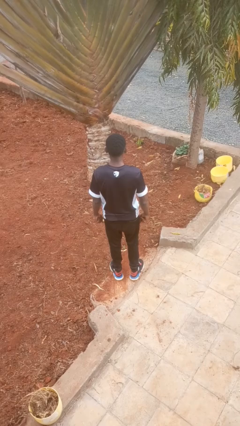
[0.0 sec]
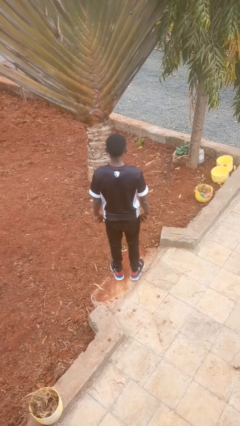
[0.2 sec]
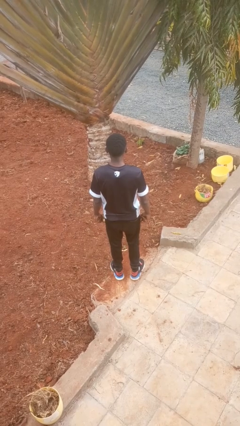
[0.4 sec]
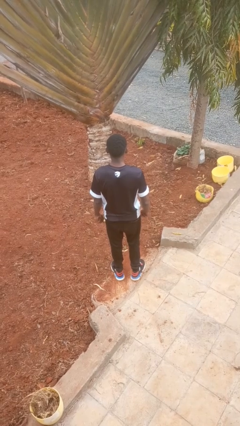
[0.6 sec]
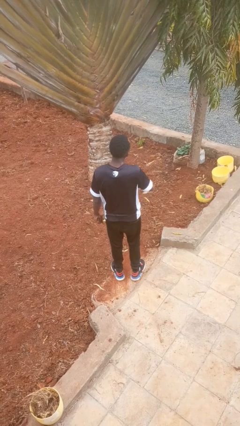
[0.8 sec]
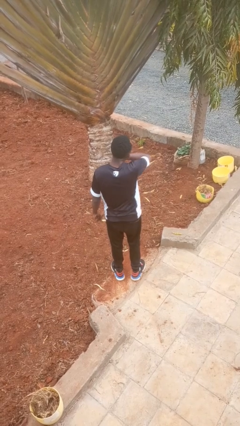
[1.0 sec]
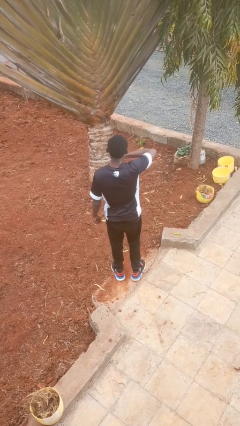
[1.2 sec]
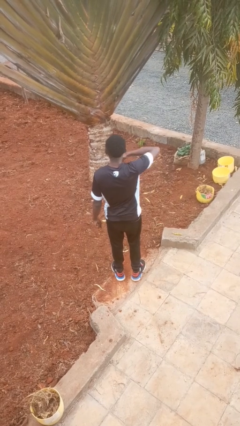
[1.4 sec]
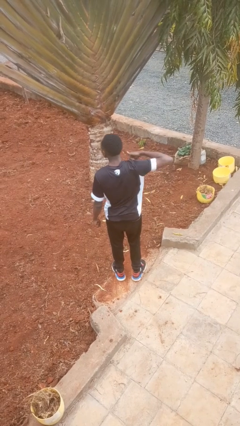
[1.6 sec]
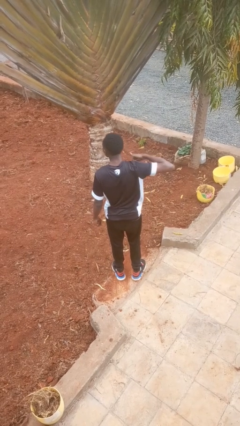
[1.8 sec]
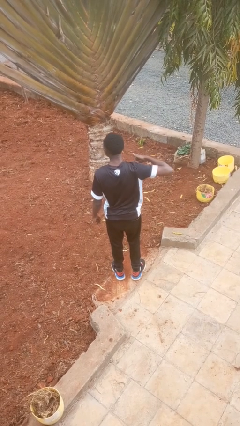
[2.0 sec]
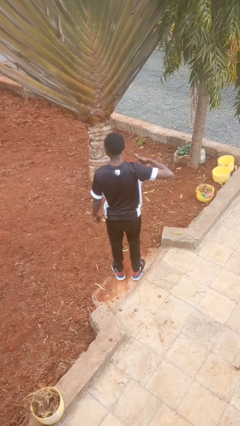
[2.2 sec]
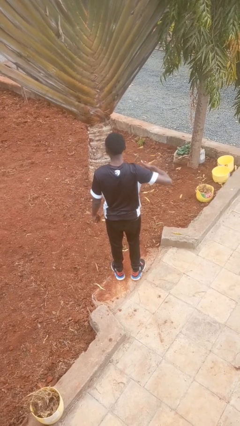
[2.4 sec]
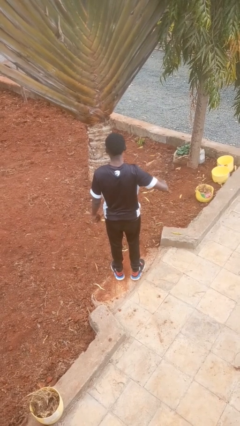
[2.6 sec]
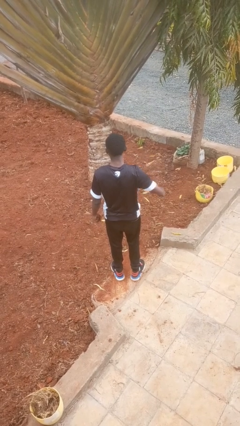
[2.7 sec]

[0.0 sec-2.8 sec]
person gestures cut

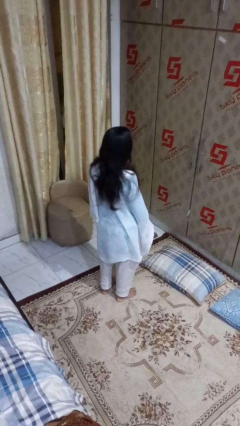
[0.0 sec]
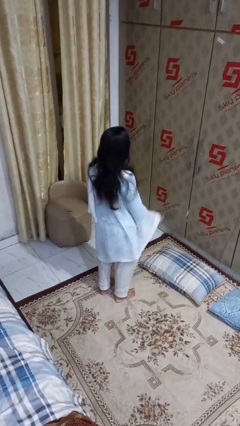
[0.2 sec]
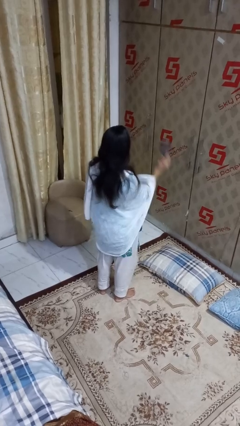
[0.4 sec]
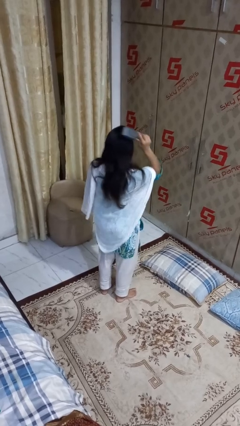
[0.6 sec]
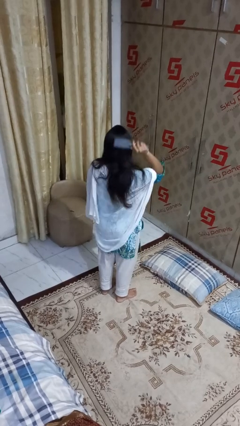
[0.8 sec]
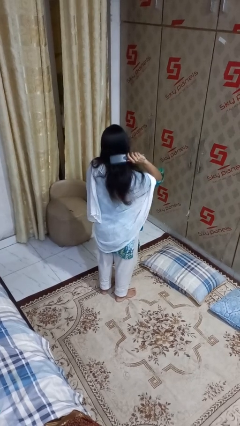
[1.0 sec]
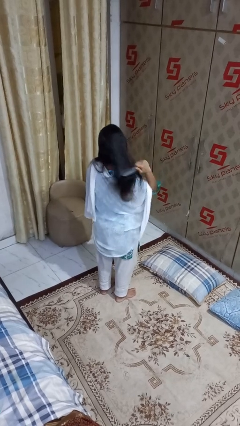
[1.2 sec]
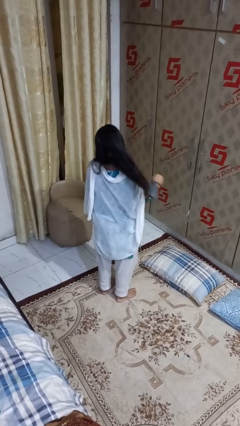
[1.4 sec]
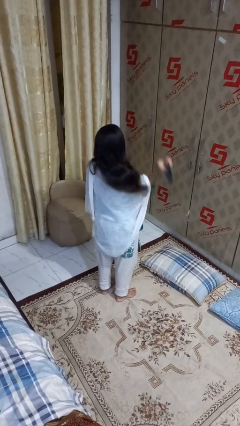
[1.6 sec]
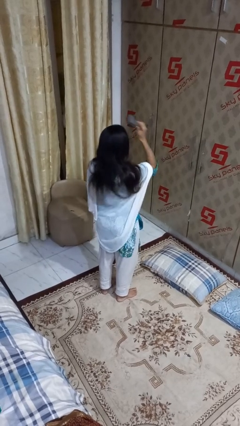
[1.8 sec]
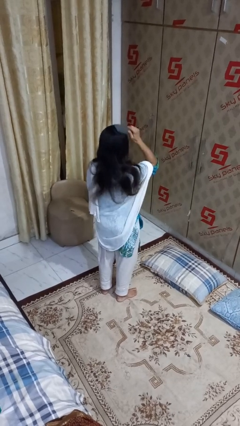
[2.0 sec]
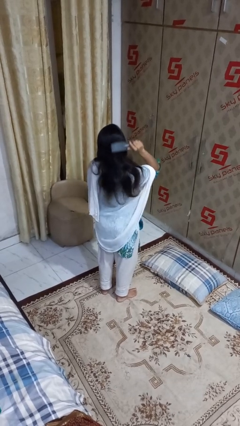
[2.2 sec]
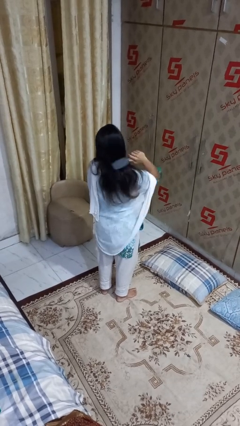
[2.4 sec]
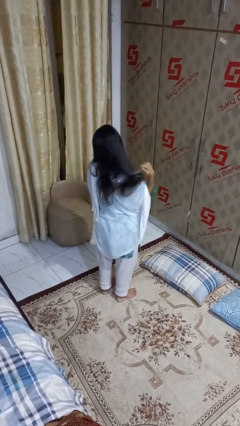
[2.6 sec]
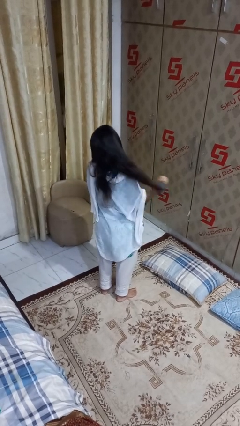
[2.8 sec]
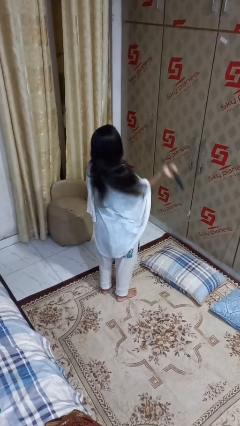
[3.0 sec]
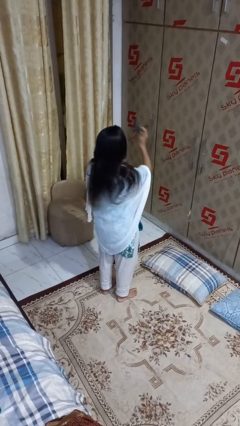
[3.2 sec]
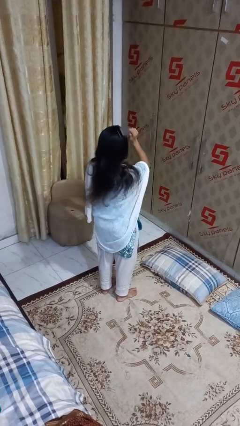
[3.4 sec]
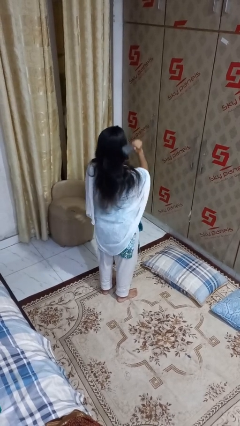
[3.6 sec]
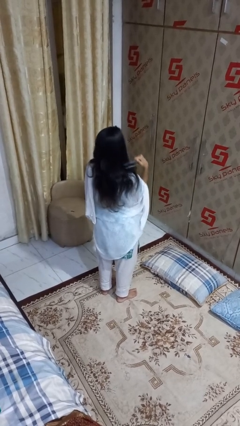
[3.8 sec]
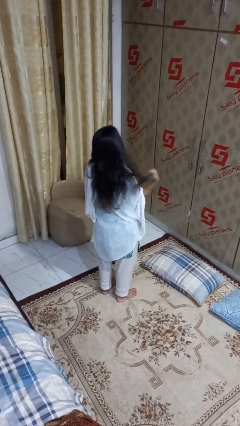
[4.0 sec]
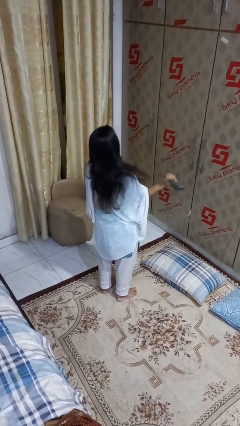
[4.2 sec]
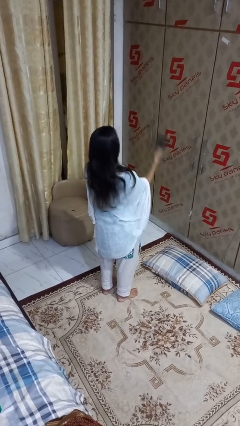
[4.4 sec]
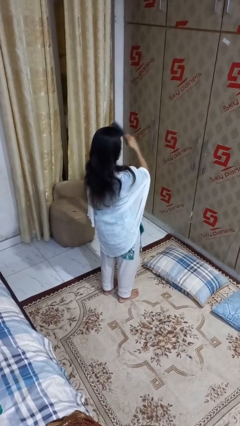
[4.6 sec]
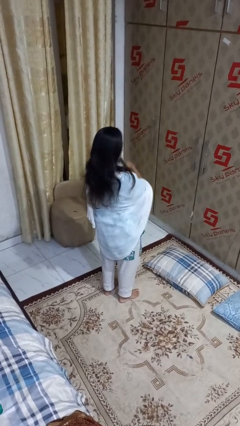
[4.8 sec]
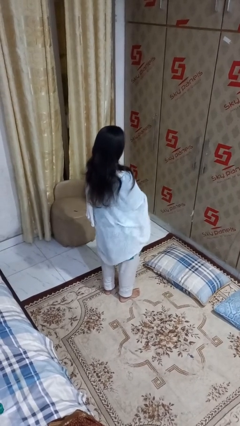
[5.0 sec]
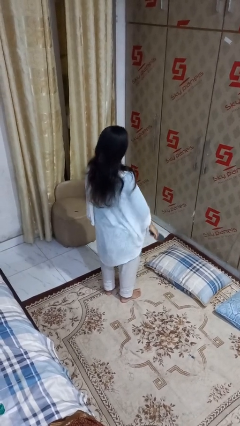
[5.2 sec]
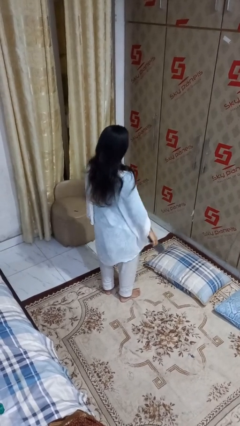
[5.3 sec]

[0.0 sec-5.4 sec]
person brushes hair

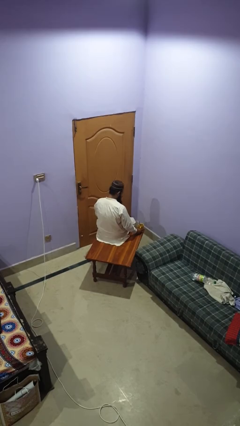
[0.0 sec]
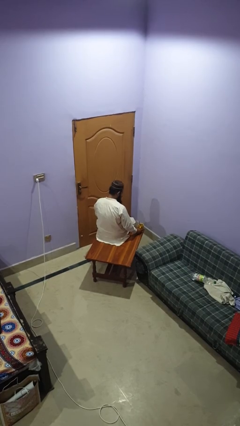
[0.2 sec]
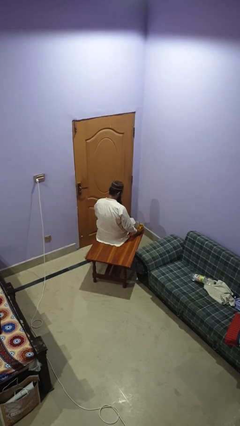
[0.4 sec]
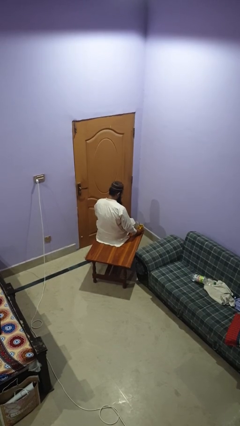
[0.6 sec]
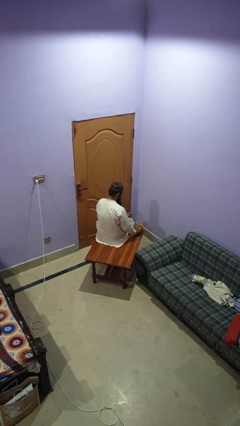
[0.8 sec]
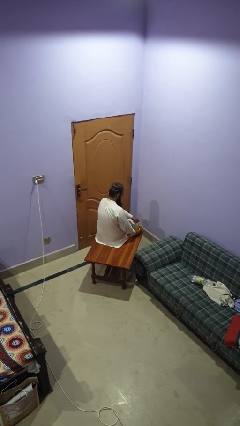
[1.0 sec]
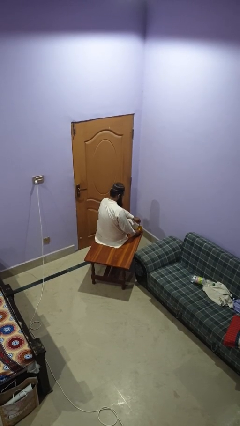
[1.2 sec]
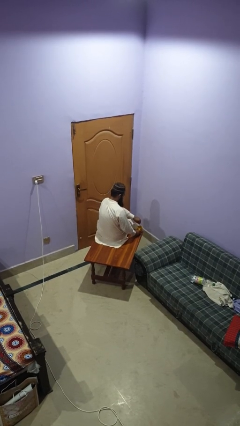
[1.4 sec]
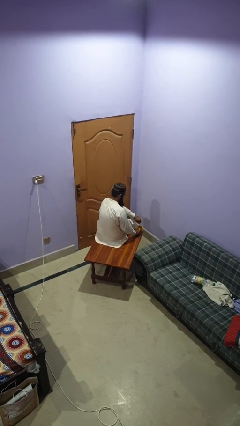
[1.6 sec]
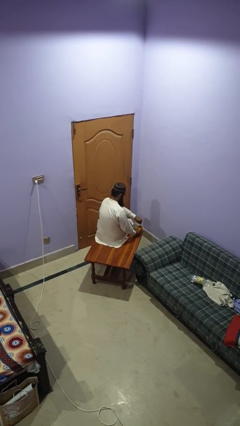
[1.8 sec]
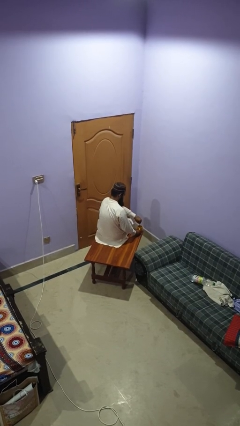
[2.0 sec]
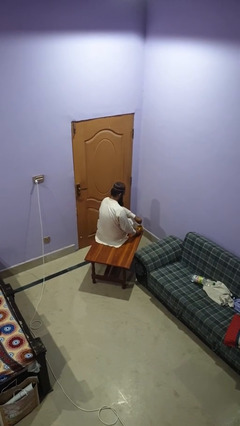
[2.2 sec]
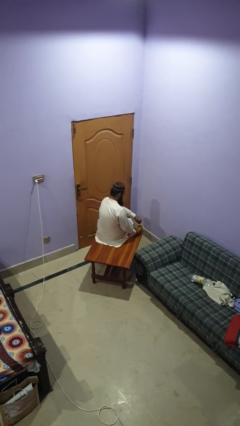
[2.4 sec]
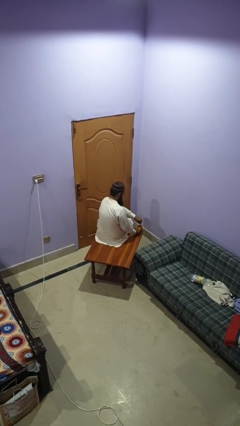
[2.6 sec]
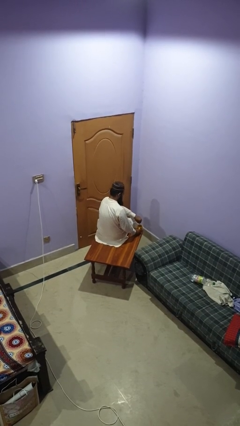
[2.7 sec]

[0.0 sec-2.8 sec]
person stirs mug

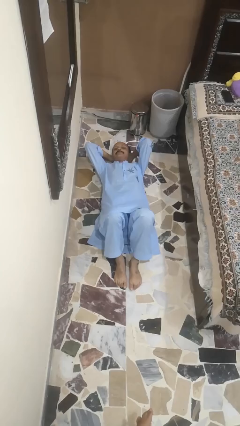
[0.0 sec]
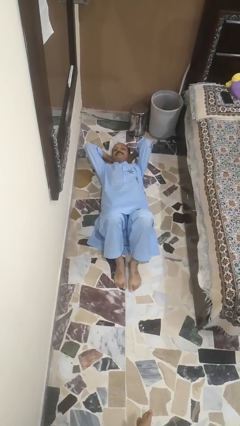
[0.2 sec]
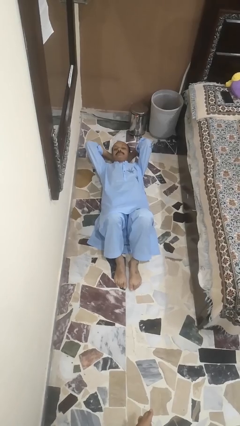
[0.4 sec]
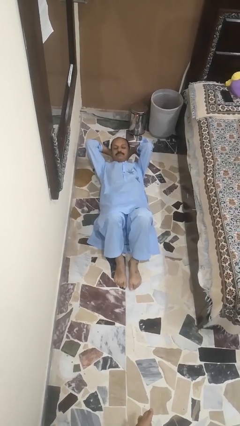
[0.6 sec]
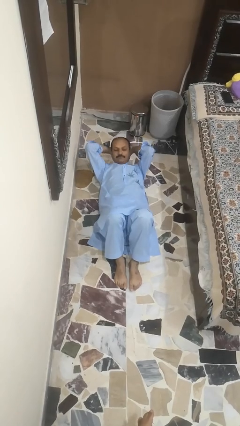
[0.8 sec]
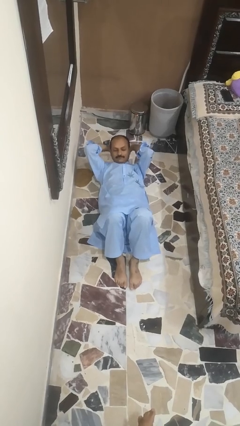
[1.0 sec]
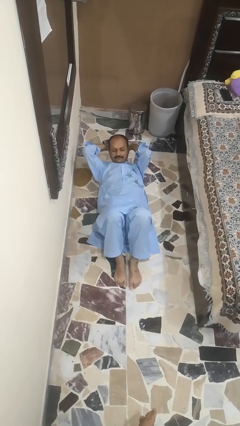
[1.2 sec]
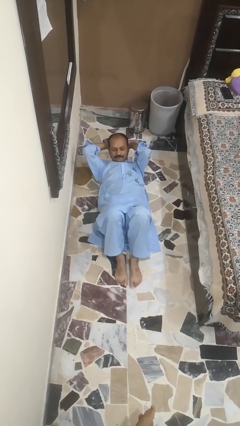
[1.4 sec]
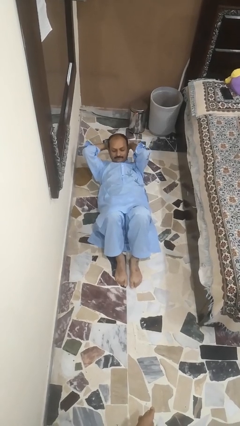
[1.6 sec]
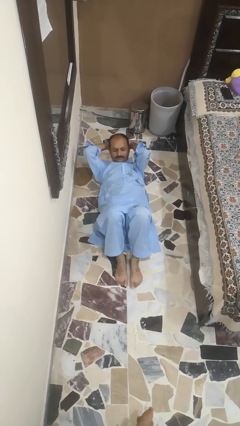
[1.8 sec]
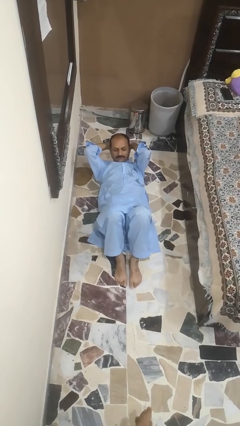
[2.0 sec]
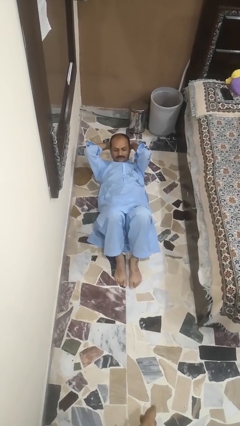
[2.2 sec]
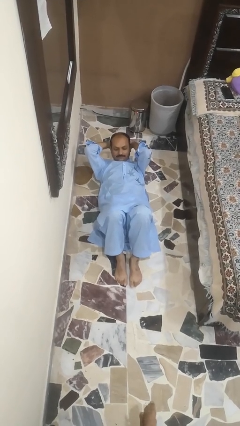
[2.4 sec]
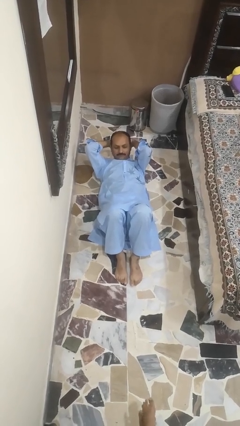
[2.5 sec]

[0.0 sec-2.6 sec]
person exercises with situp

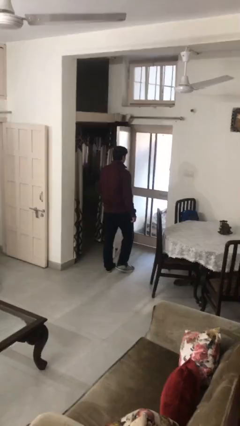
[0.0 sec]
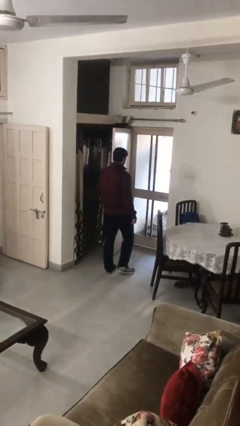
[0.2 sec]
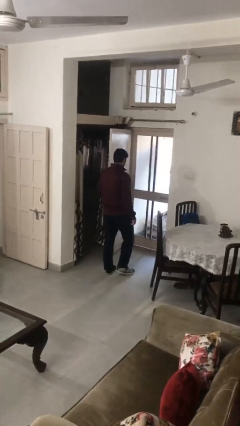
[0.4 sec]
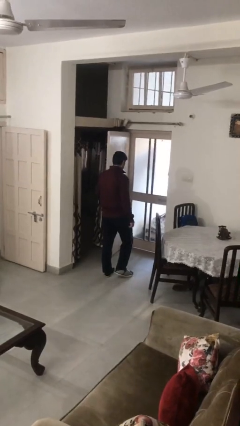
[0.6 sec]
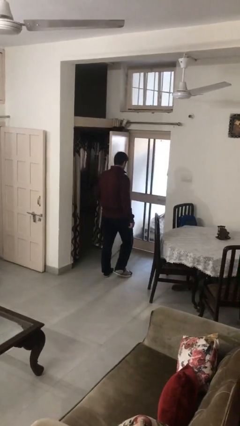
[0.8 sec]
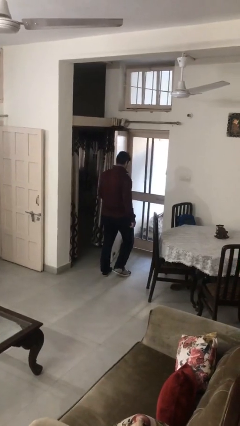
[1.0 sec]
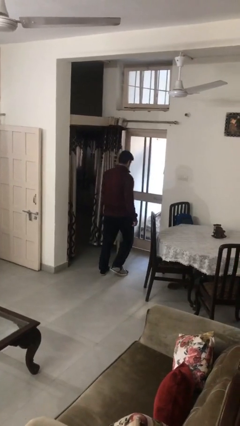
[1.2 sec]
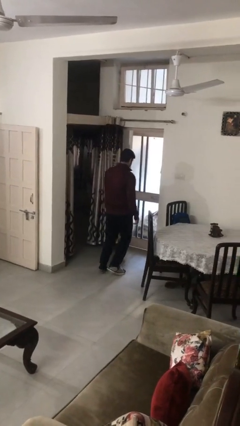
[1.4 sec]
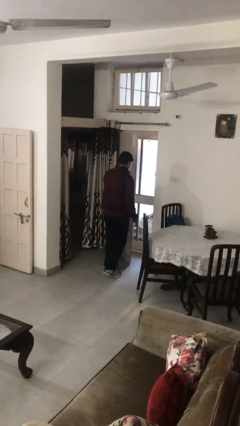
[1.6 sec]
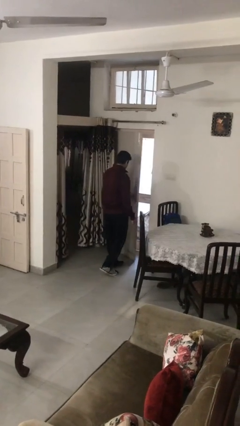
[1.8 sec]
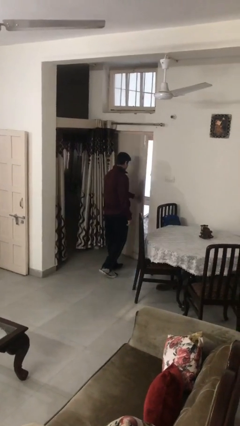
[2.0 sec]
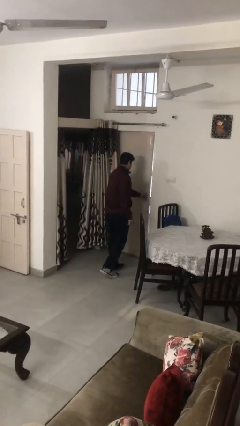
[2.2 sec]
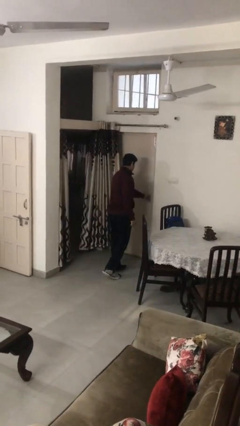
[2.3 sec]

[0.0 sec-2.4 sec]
person closes facility door

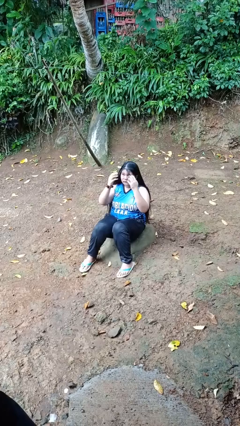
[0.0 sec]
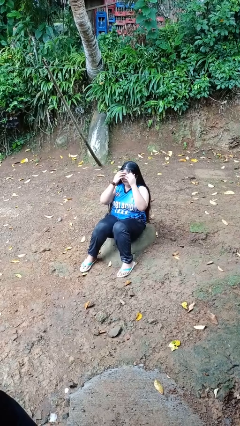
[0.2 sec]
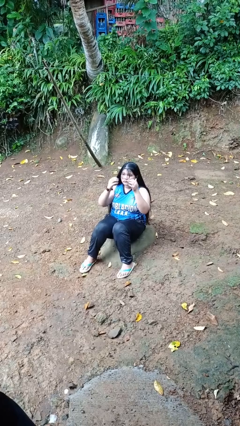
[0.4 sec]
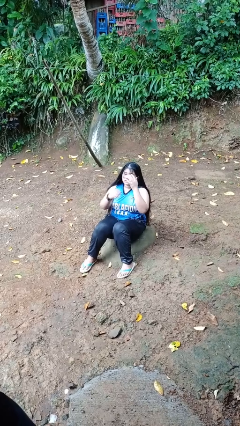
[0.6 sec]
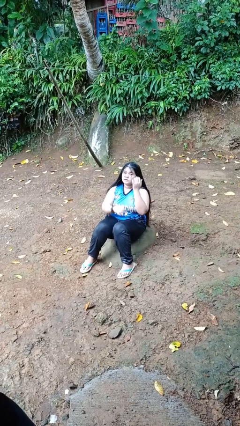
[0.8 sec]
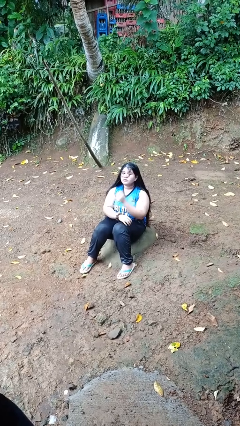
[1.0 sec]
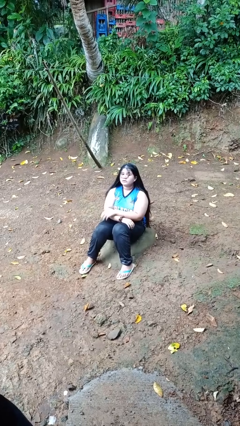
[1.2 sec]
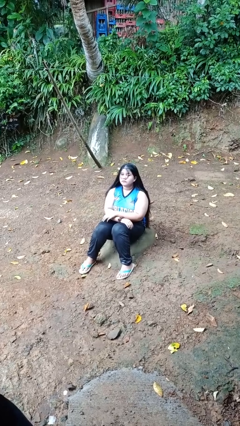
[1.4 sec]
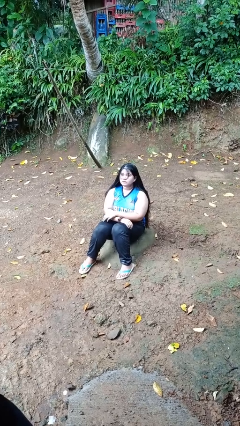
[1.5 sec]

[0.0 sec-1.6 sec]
person strokes hair
